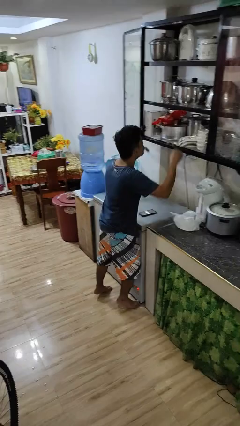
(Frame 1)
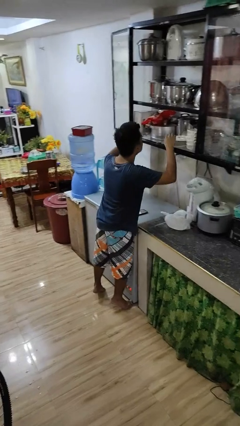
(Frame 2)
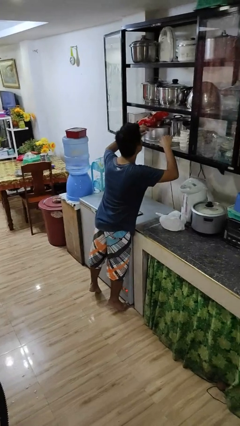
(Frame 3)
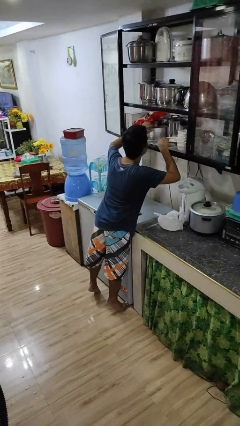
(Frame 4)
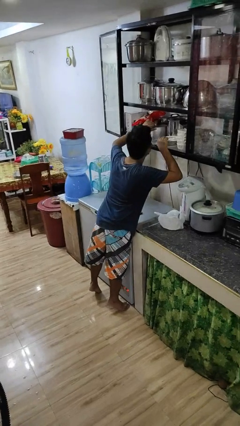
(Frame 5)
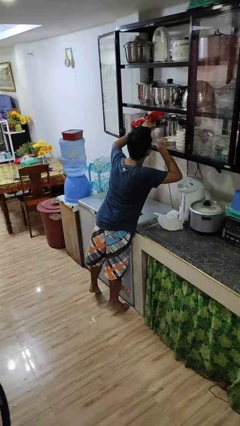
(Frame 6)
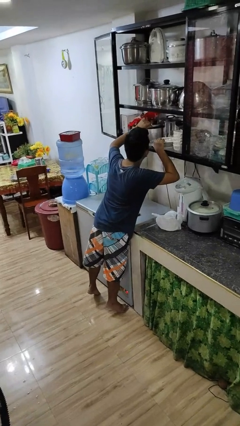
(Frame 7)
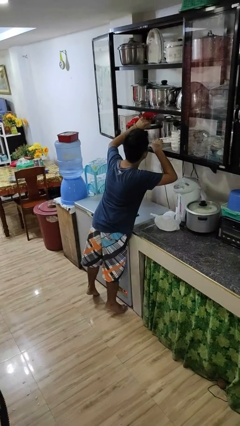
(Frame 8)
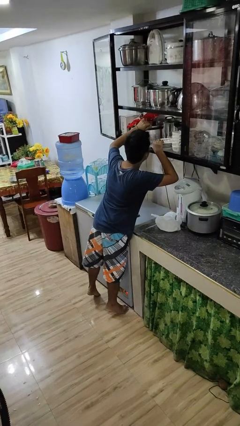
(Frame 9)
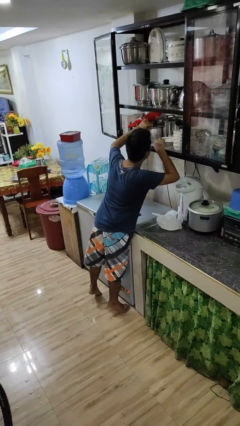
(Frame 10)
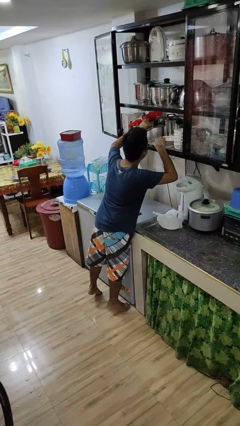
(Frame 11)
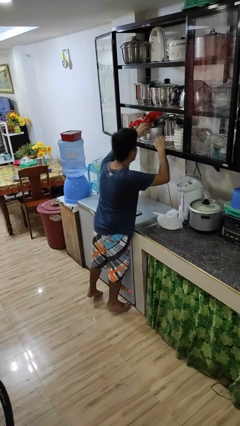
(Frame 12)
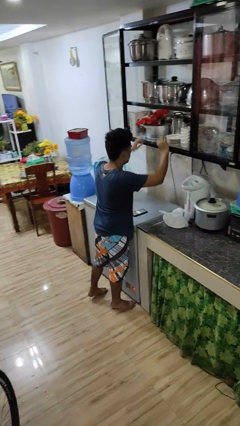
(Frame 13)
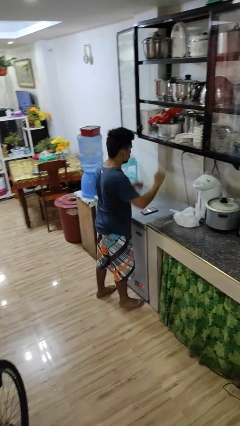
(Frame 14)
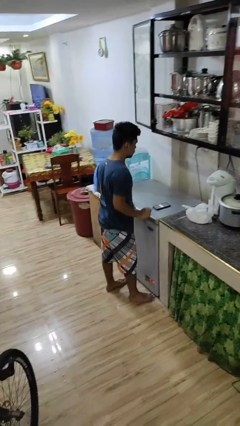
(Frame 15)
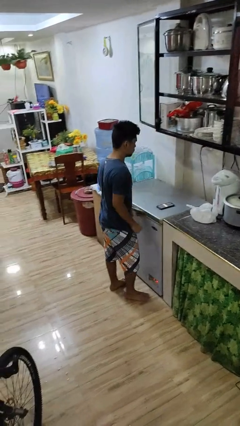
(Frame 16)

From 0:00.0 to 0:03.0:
person searches in cabinet

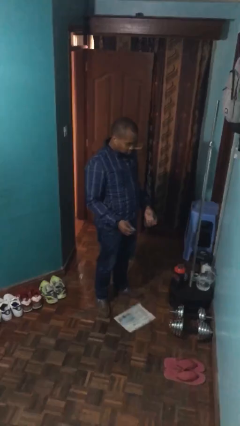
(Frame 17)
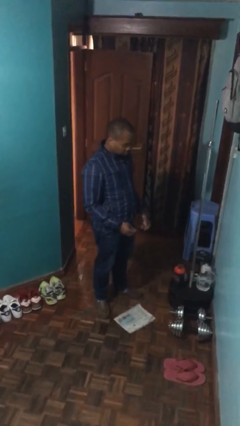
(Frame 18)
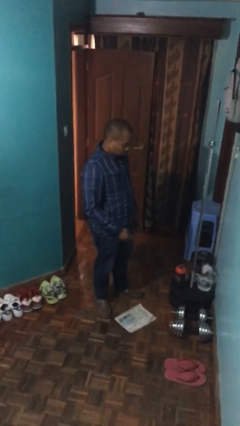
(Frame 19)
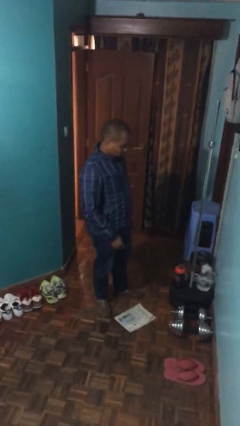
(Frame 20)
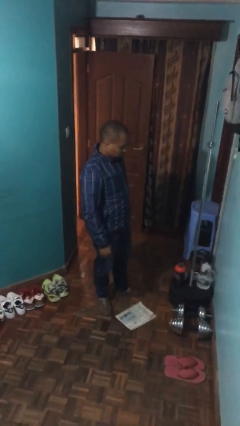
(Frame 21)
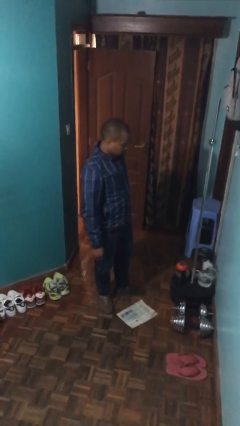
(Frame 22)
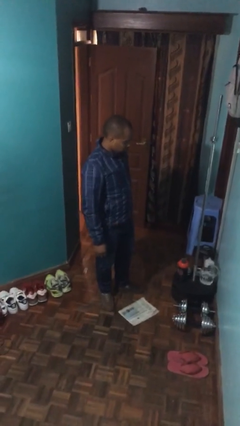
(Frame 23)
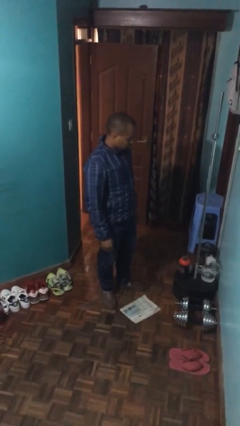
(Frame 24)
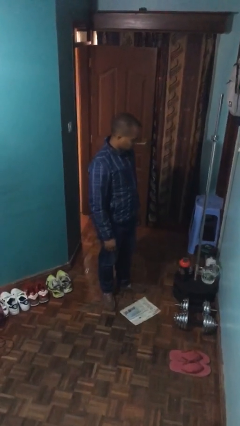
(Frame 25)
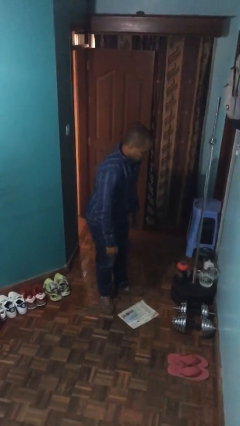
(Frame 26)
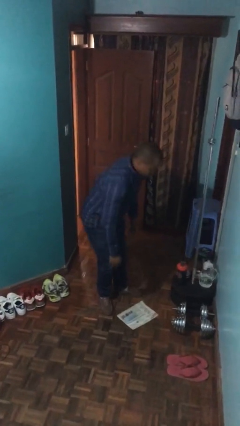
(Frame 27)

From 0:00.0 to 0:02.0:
person drops object

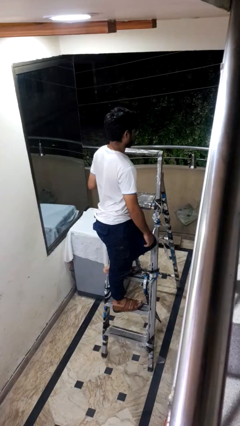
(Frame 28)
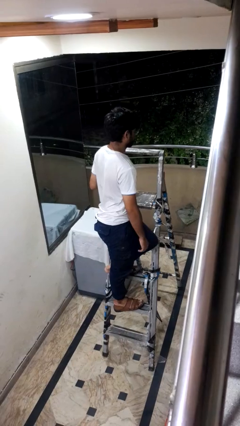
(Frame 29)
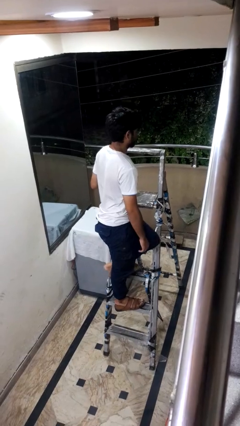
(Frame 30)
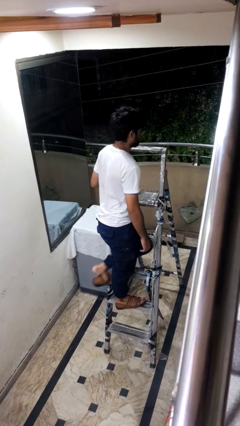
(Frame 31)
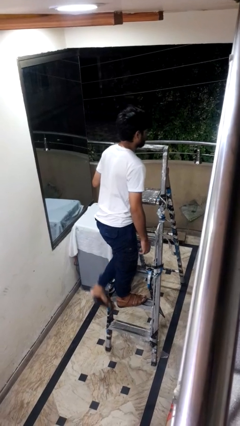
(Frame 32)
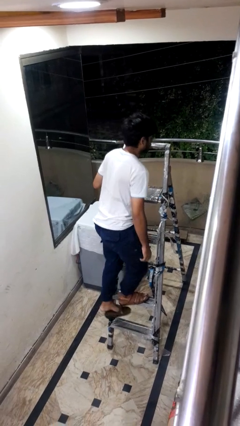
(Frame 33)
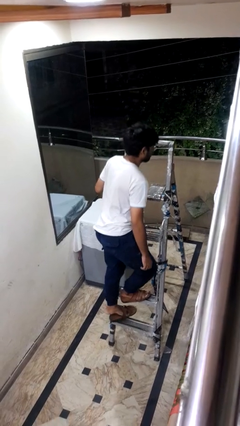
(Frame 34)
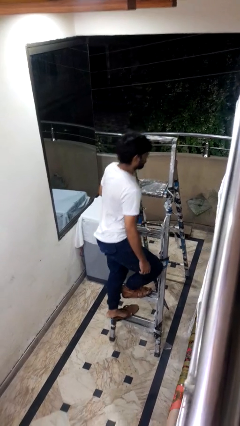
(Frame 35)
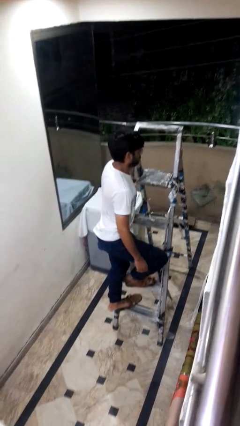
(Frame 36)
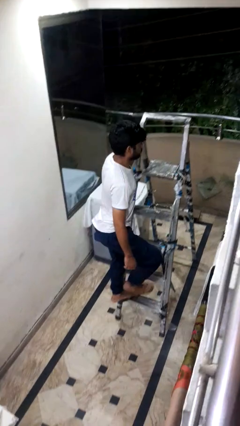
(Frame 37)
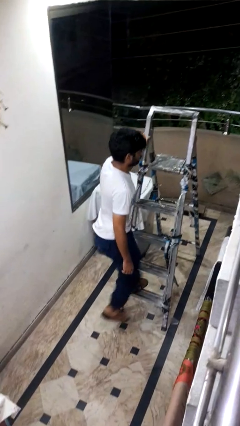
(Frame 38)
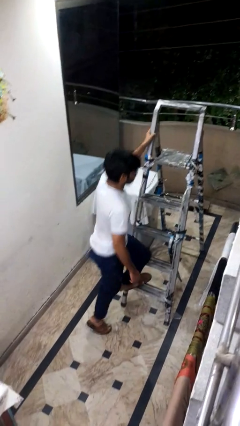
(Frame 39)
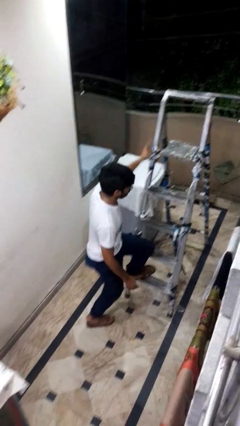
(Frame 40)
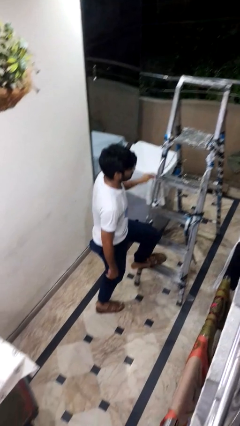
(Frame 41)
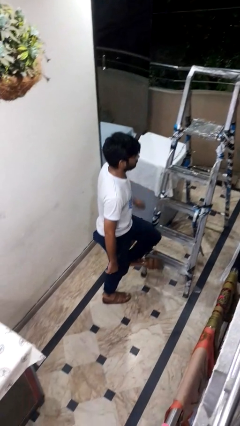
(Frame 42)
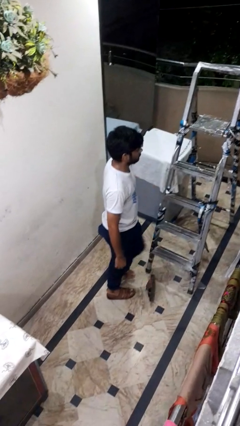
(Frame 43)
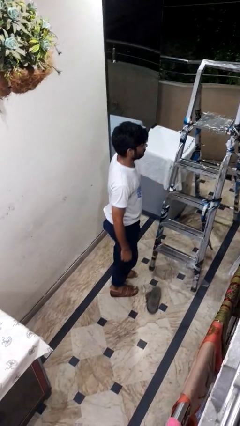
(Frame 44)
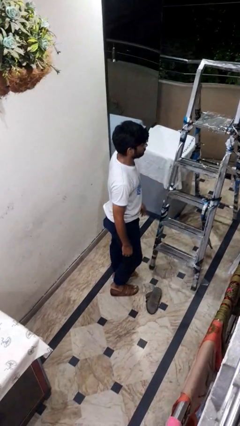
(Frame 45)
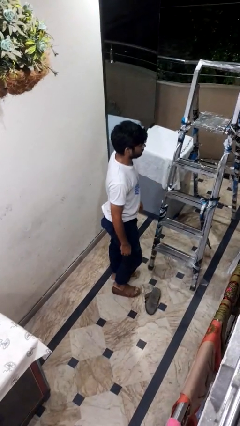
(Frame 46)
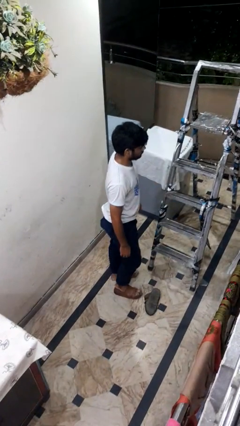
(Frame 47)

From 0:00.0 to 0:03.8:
person climbs down ladder

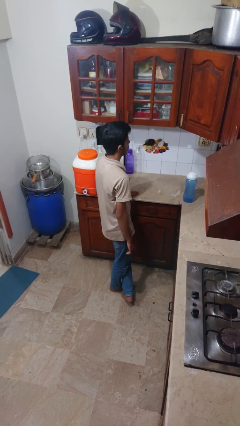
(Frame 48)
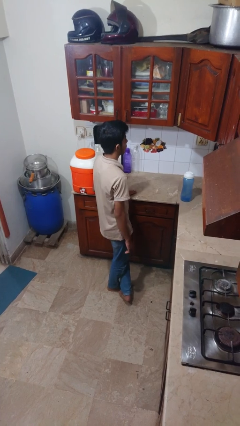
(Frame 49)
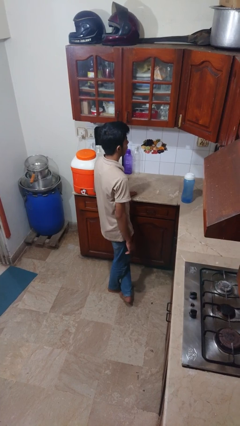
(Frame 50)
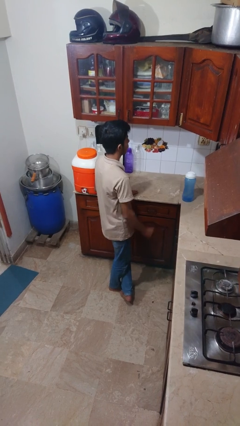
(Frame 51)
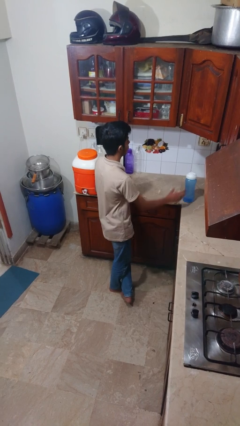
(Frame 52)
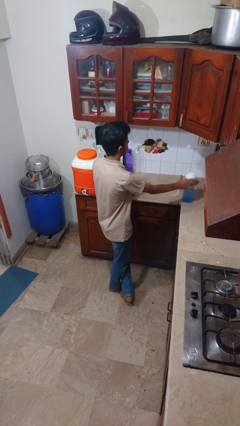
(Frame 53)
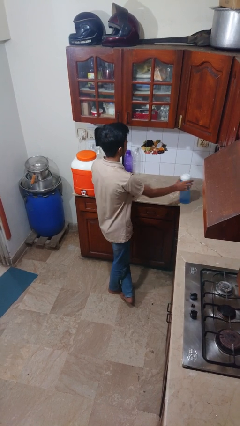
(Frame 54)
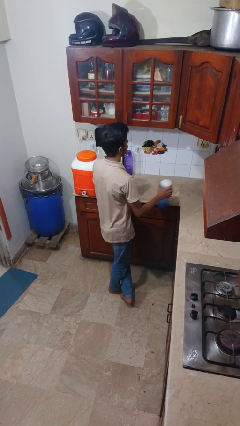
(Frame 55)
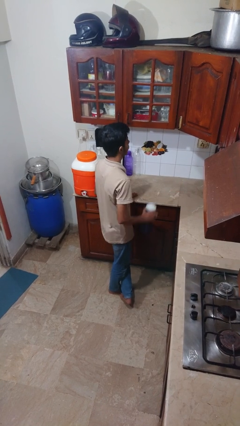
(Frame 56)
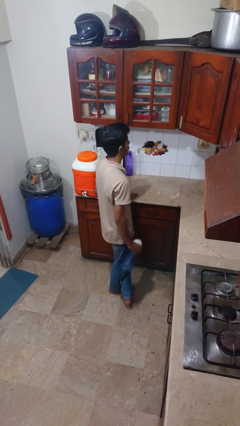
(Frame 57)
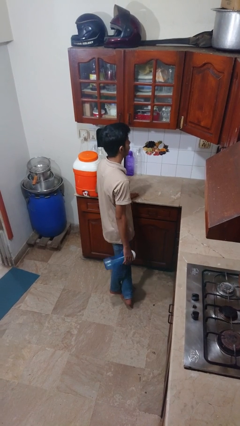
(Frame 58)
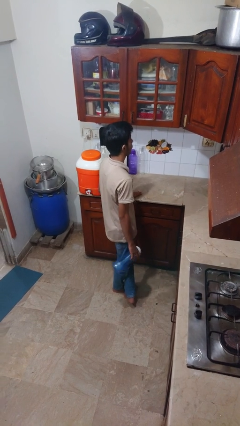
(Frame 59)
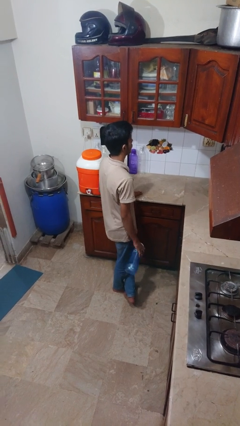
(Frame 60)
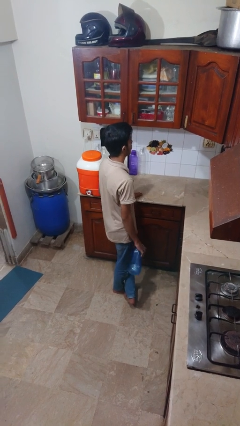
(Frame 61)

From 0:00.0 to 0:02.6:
person picks up object from countertop

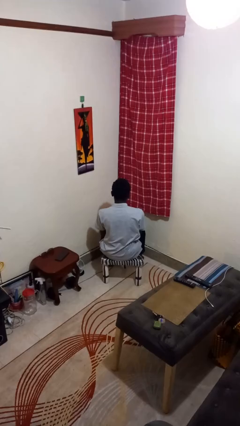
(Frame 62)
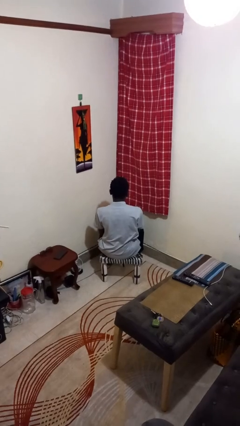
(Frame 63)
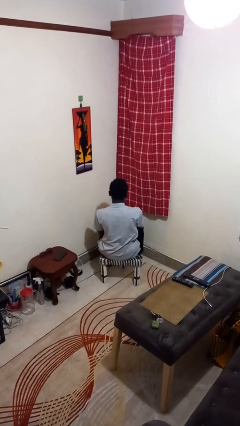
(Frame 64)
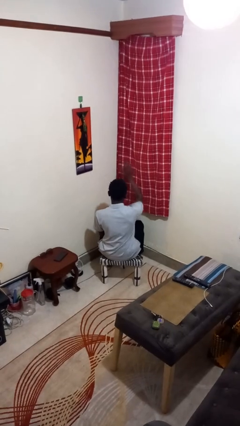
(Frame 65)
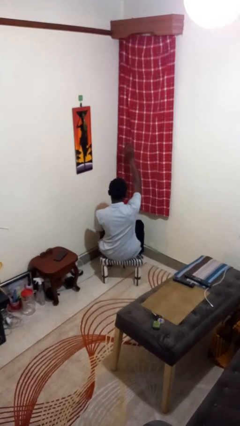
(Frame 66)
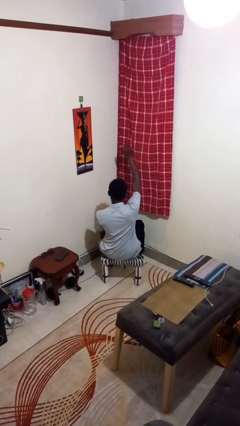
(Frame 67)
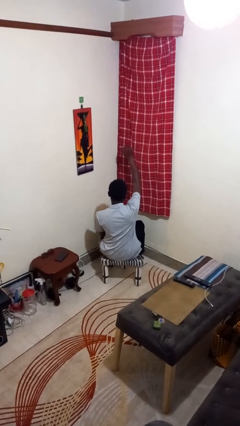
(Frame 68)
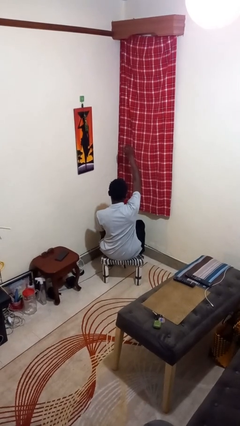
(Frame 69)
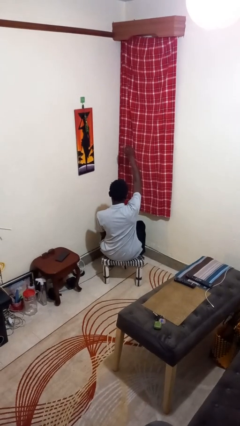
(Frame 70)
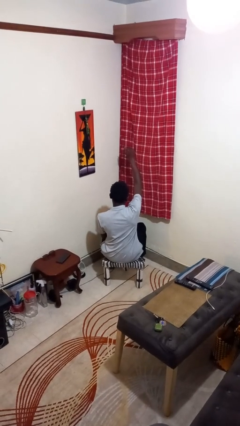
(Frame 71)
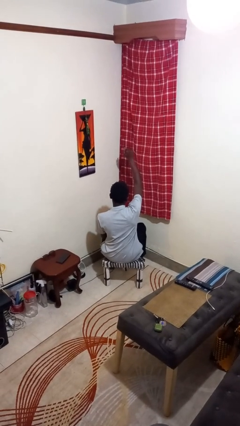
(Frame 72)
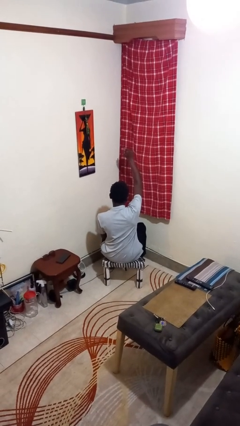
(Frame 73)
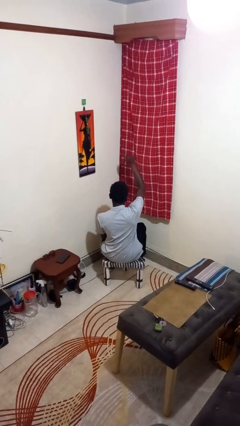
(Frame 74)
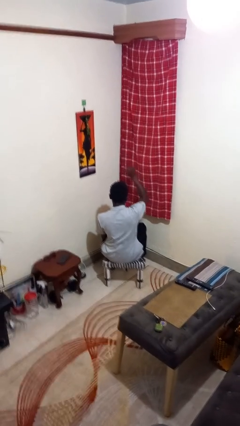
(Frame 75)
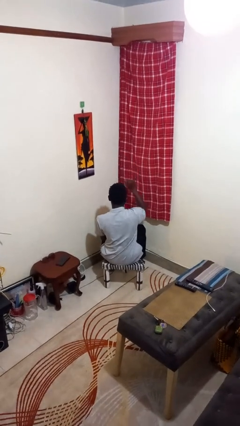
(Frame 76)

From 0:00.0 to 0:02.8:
person gestures come here

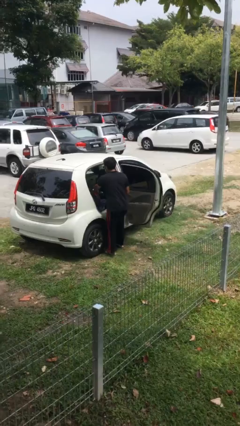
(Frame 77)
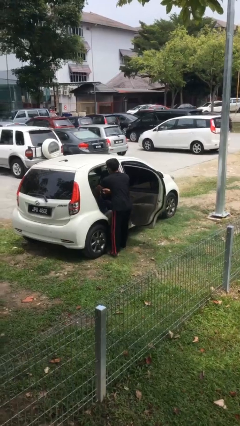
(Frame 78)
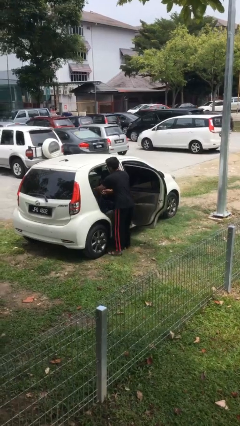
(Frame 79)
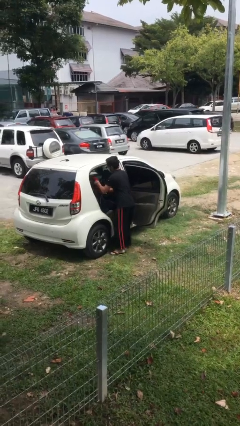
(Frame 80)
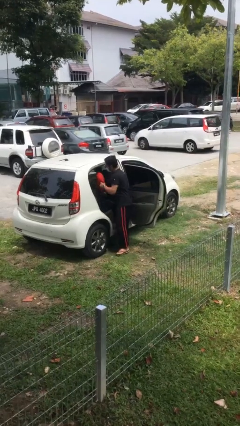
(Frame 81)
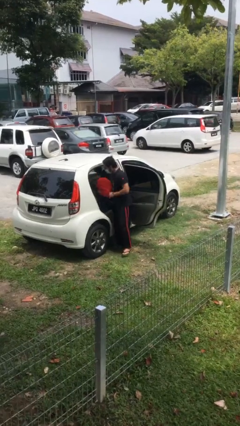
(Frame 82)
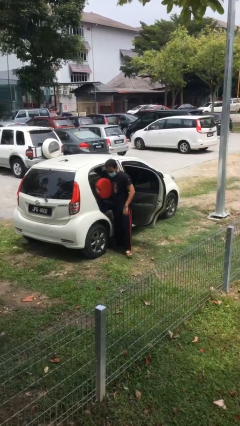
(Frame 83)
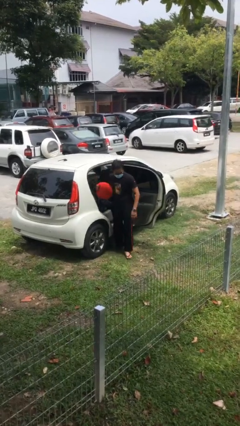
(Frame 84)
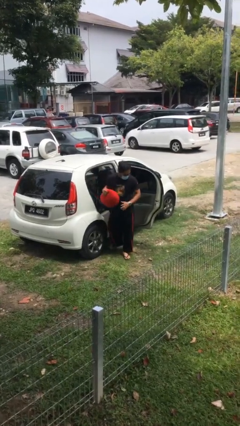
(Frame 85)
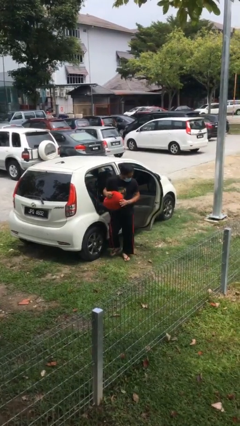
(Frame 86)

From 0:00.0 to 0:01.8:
person unloads car

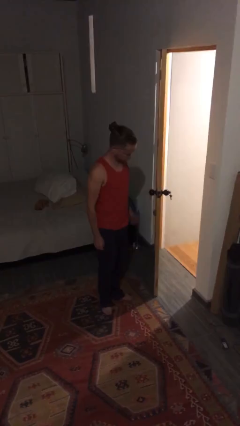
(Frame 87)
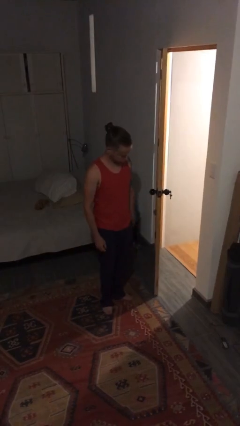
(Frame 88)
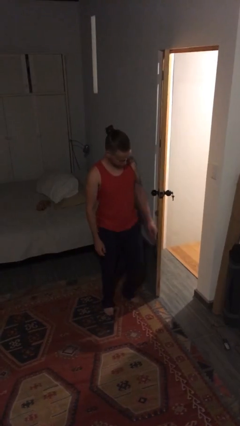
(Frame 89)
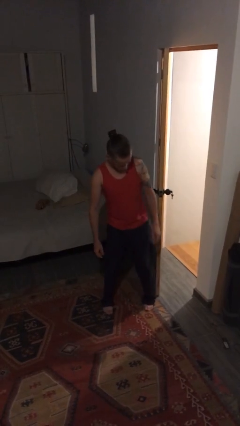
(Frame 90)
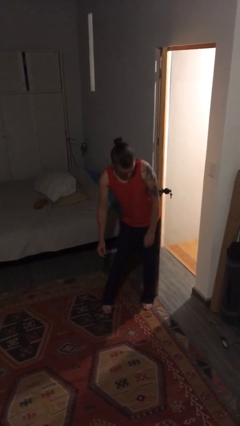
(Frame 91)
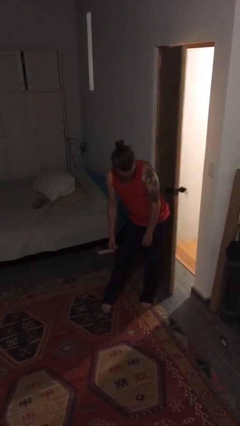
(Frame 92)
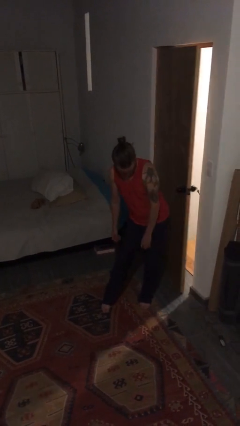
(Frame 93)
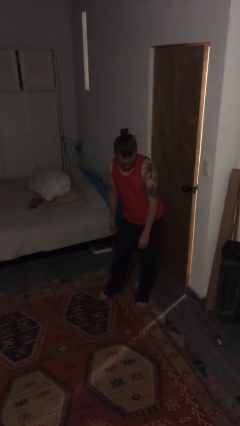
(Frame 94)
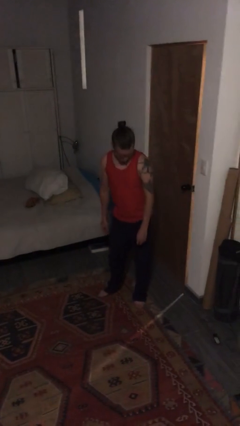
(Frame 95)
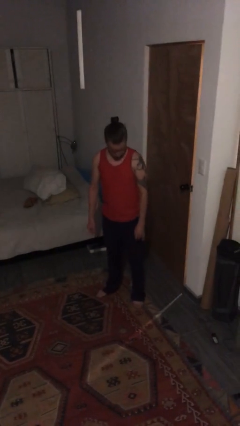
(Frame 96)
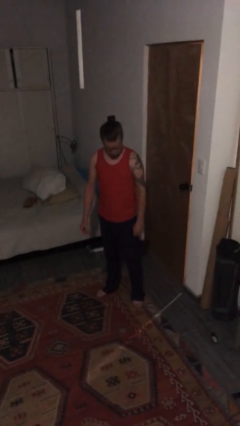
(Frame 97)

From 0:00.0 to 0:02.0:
person closes door with hip
